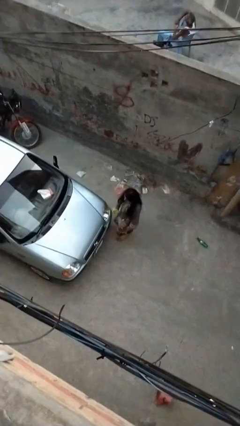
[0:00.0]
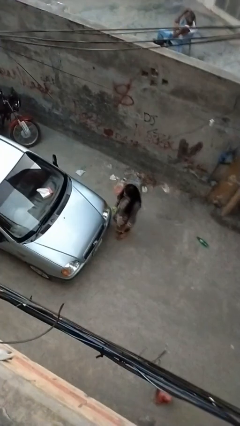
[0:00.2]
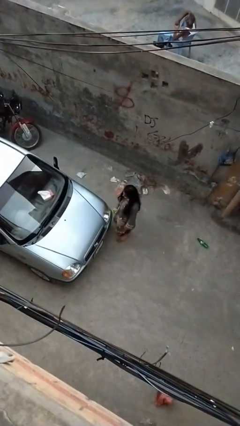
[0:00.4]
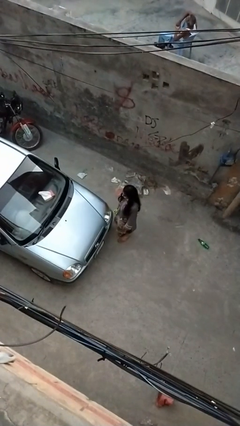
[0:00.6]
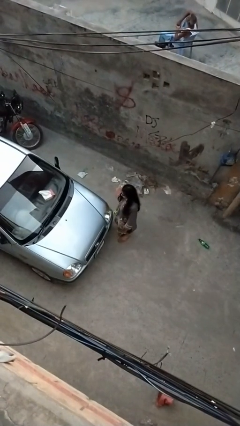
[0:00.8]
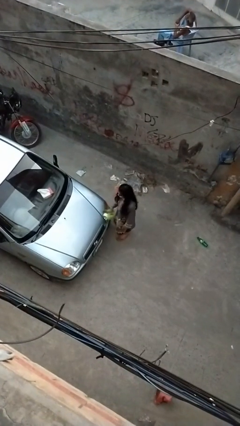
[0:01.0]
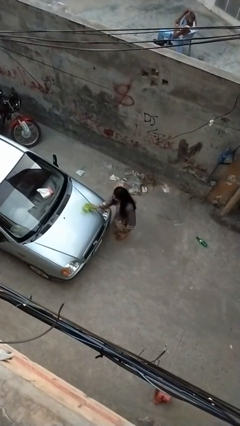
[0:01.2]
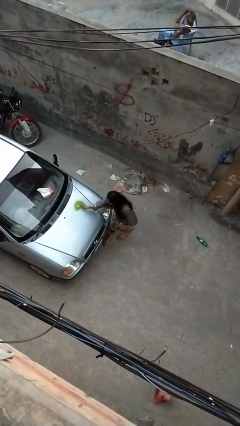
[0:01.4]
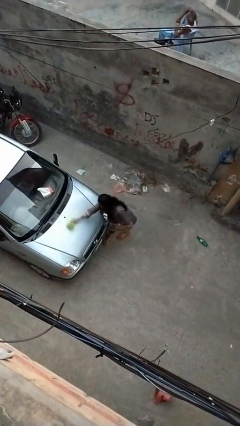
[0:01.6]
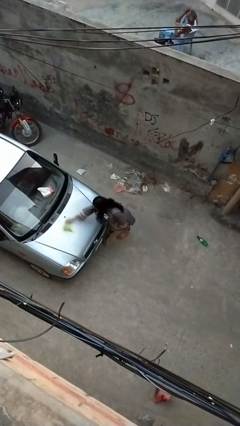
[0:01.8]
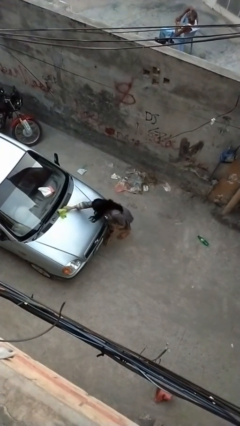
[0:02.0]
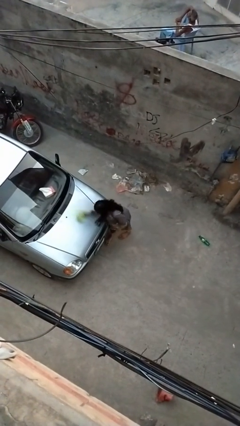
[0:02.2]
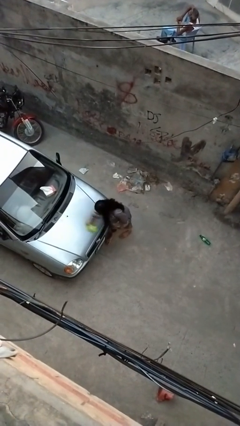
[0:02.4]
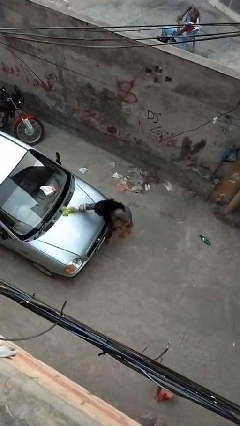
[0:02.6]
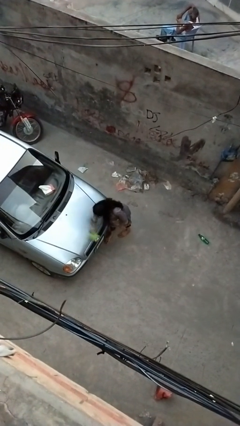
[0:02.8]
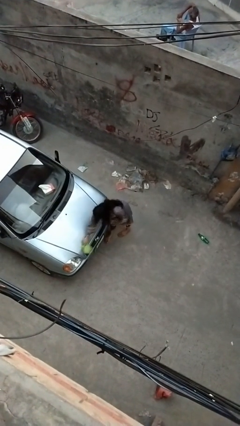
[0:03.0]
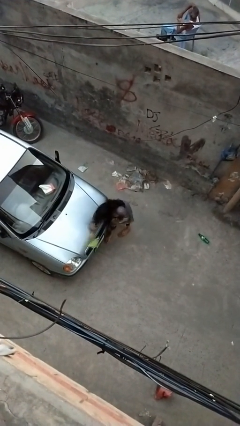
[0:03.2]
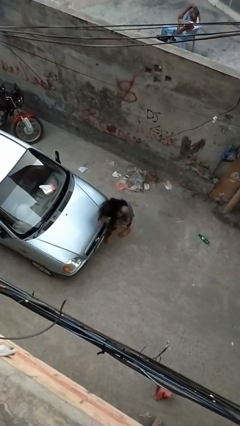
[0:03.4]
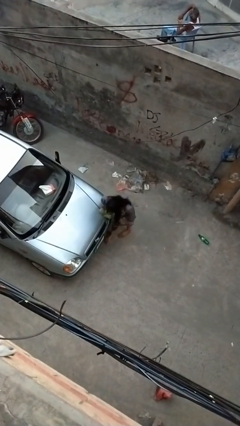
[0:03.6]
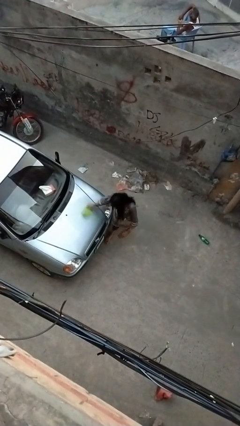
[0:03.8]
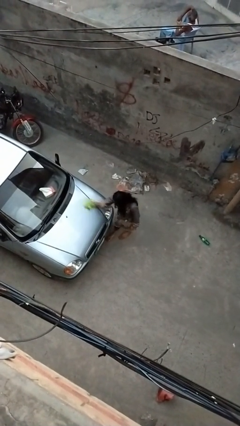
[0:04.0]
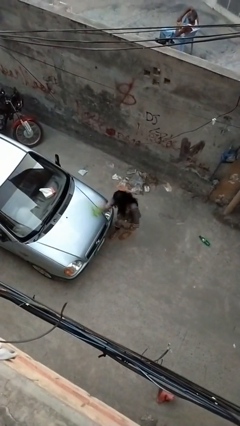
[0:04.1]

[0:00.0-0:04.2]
person polishes car with rag

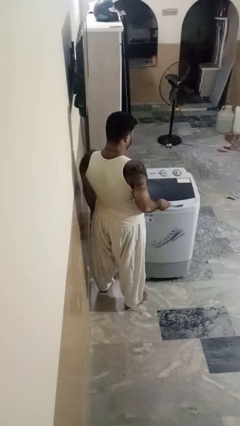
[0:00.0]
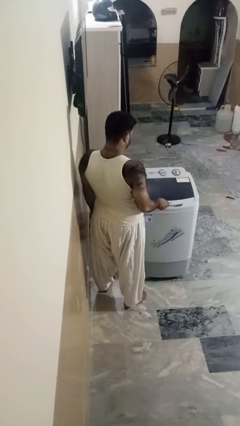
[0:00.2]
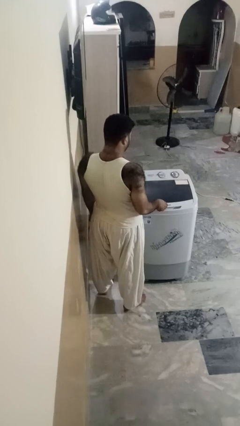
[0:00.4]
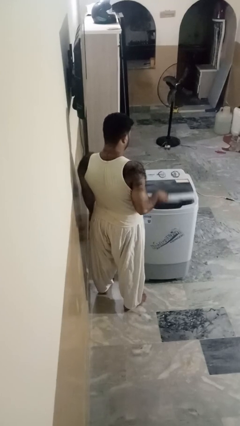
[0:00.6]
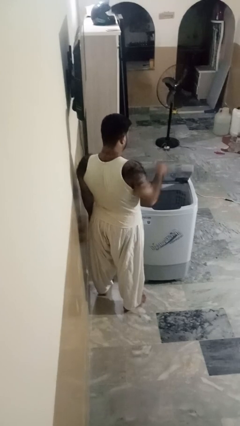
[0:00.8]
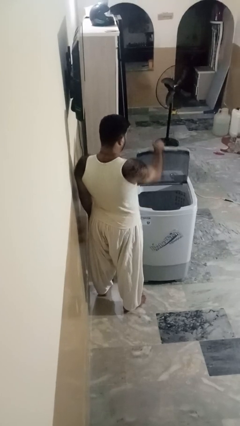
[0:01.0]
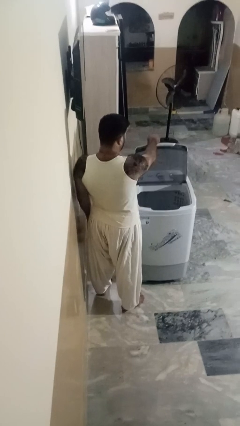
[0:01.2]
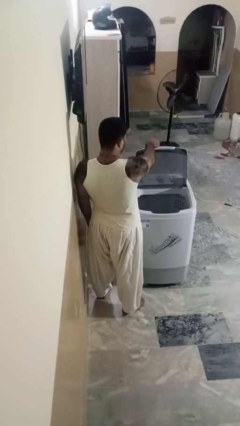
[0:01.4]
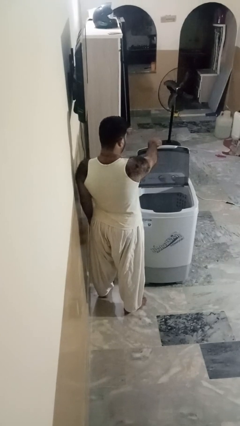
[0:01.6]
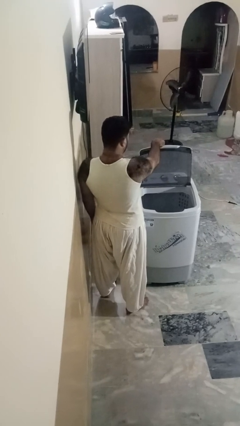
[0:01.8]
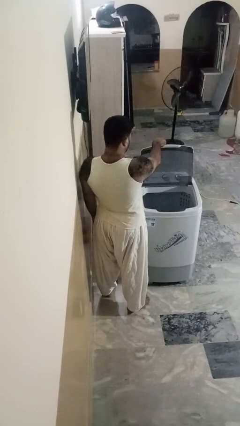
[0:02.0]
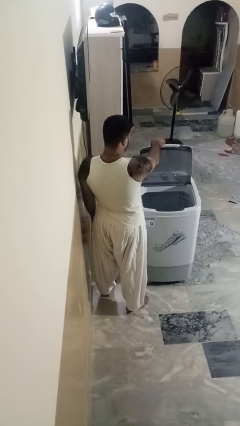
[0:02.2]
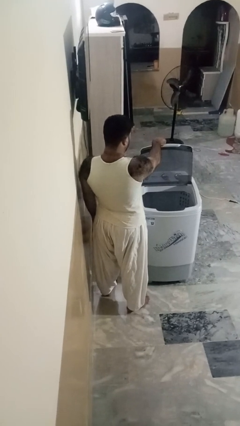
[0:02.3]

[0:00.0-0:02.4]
person opens clothes washer

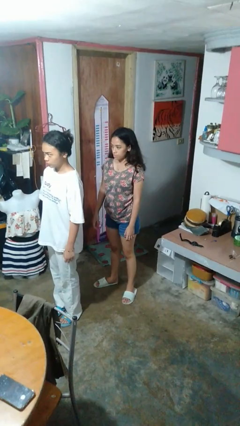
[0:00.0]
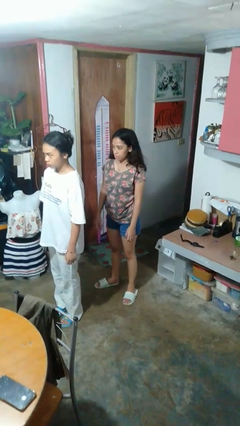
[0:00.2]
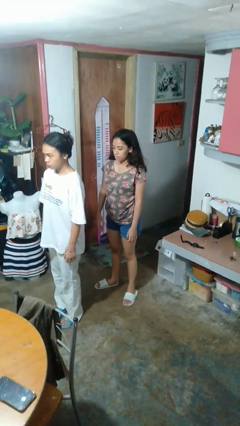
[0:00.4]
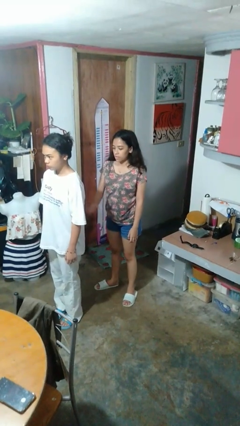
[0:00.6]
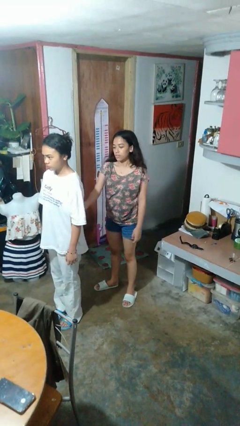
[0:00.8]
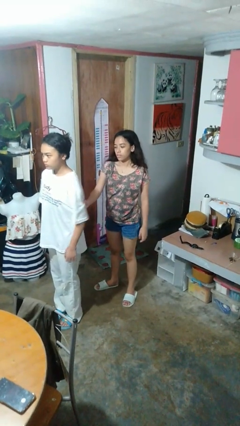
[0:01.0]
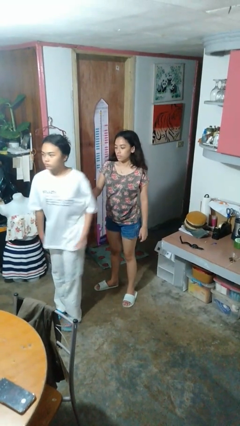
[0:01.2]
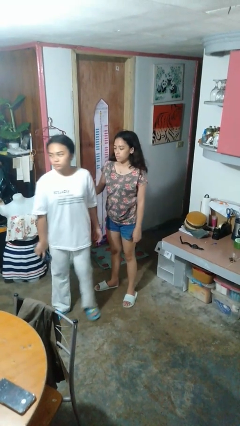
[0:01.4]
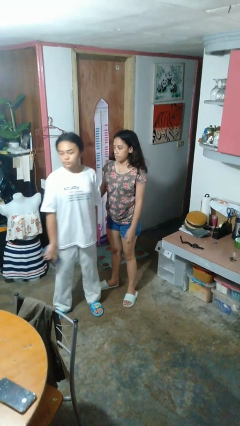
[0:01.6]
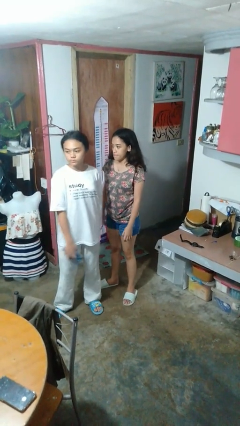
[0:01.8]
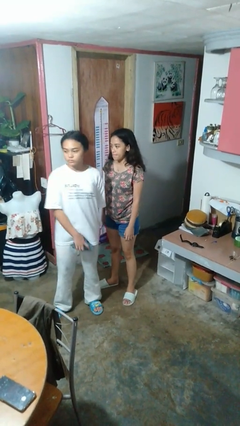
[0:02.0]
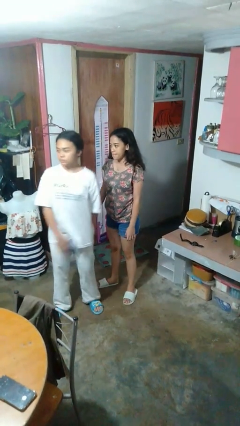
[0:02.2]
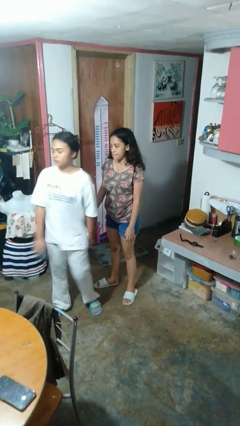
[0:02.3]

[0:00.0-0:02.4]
person grabs person by bicep

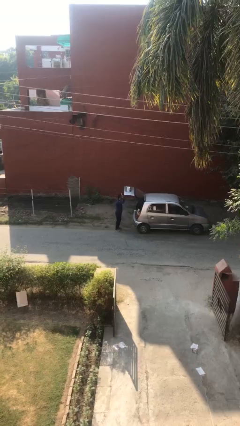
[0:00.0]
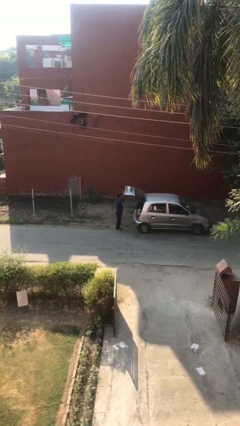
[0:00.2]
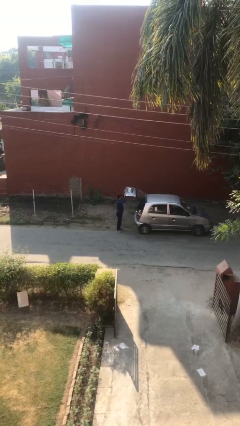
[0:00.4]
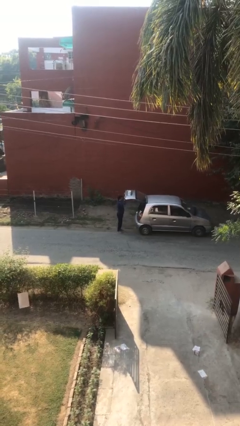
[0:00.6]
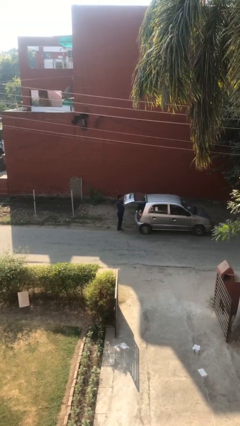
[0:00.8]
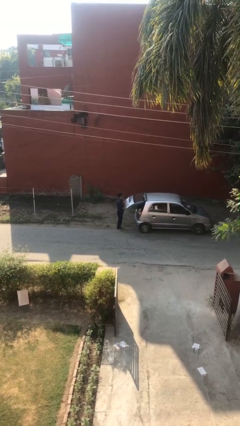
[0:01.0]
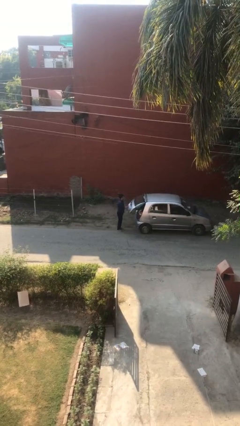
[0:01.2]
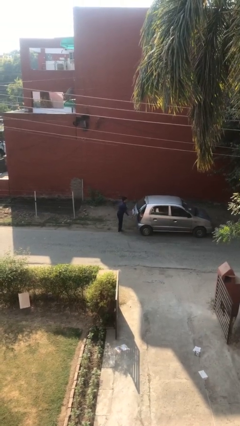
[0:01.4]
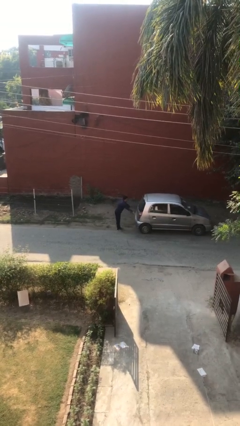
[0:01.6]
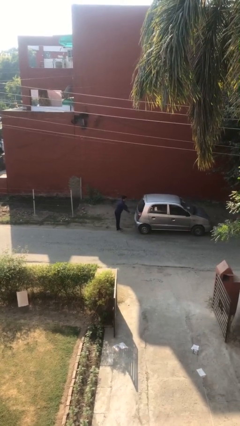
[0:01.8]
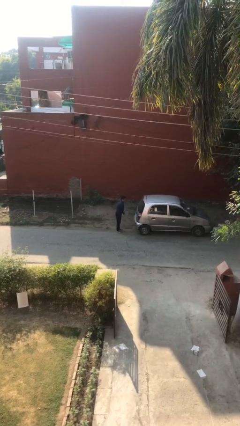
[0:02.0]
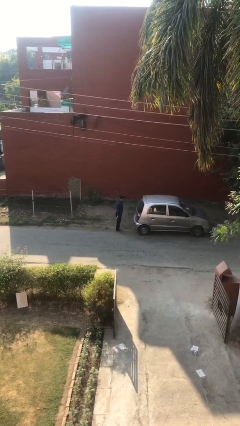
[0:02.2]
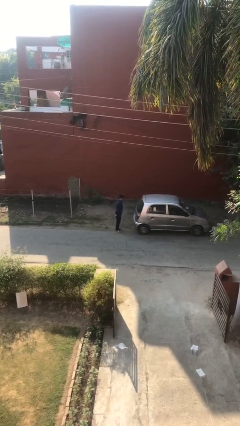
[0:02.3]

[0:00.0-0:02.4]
person closes car trunk

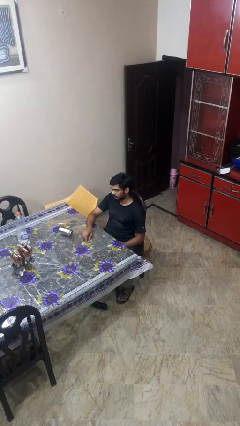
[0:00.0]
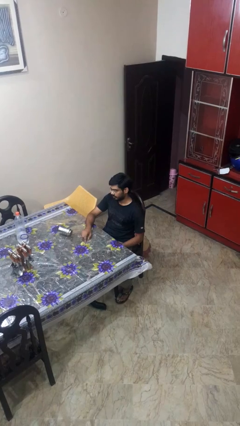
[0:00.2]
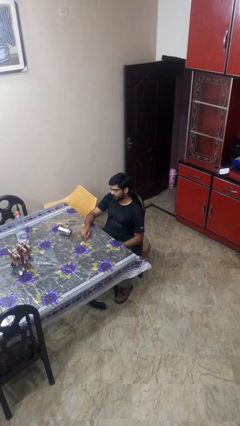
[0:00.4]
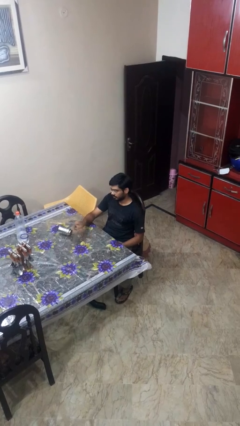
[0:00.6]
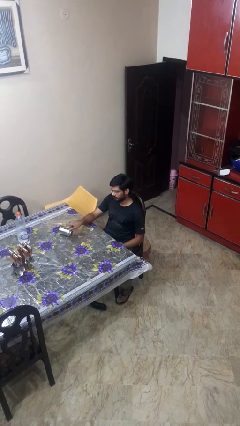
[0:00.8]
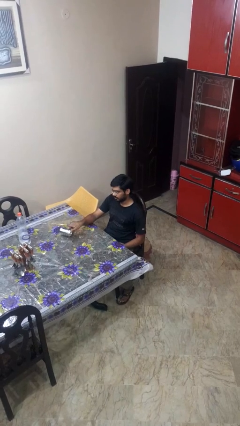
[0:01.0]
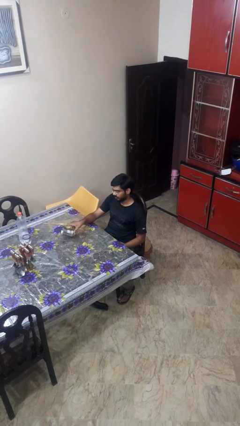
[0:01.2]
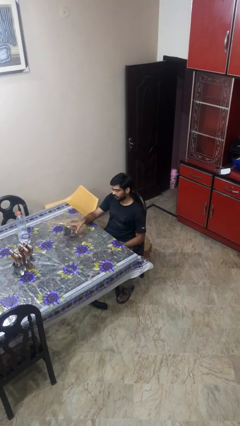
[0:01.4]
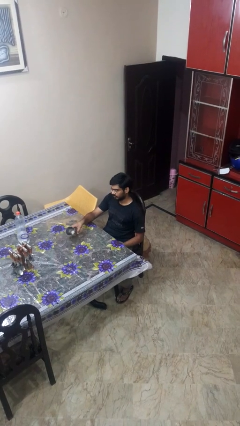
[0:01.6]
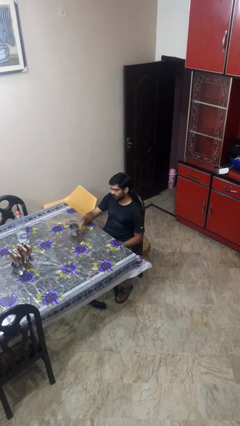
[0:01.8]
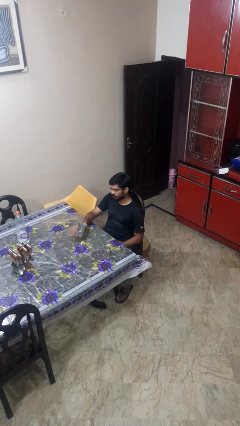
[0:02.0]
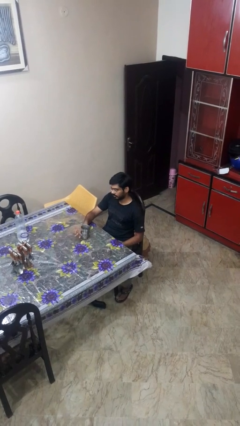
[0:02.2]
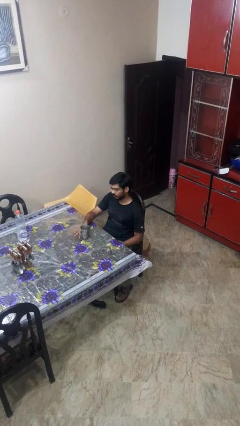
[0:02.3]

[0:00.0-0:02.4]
person sets upright glass

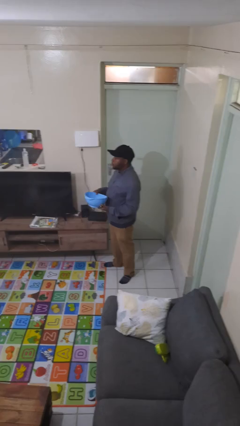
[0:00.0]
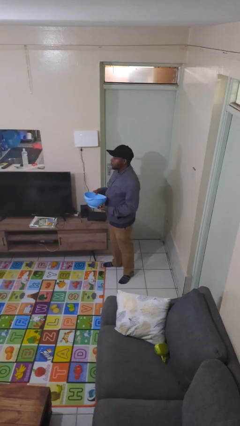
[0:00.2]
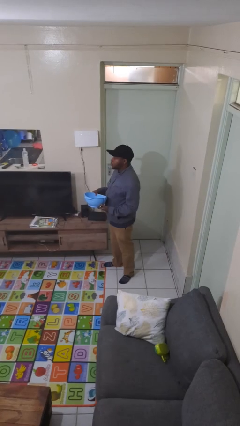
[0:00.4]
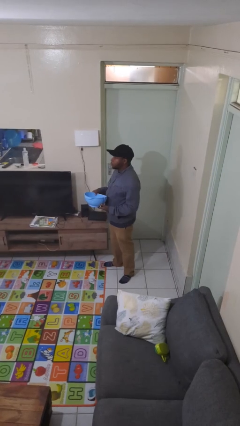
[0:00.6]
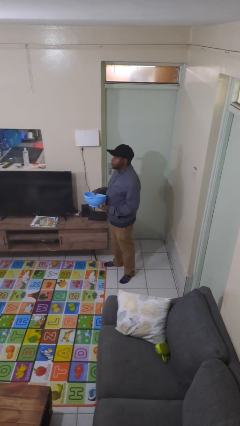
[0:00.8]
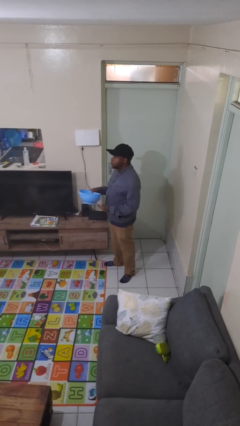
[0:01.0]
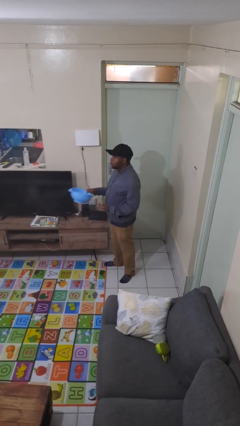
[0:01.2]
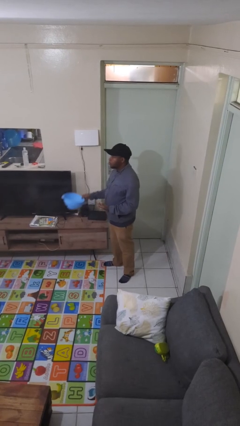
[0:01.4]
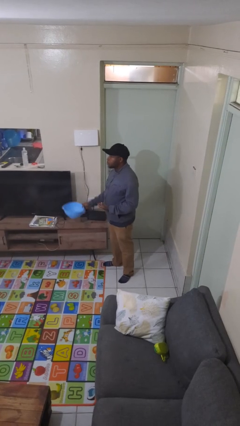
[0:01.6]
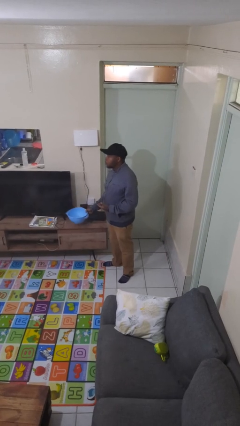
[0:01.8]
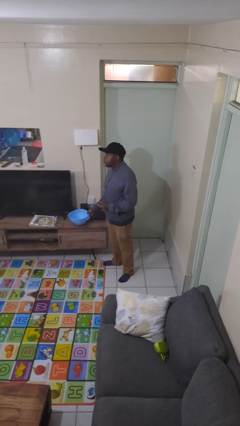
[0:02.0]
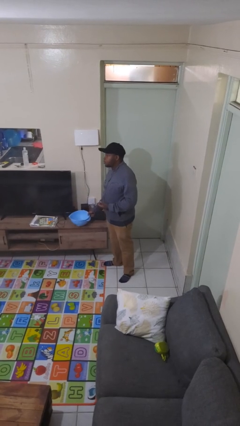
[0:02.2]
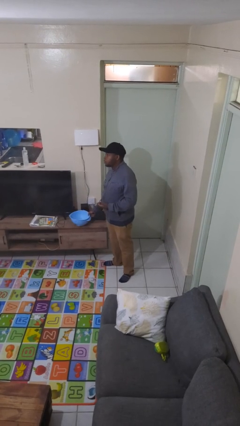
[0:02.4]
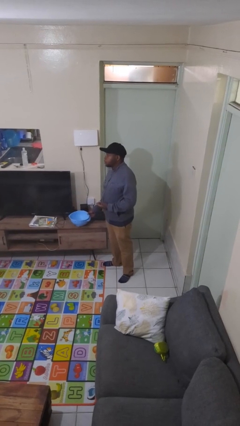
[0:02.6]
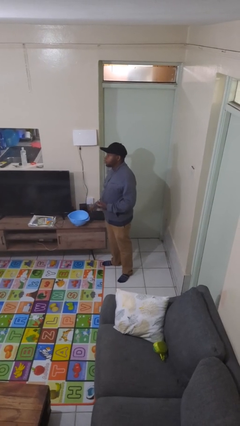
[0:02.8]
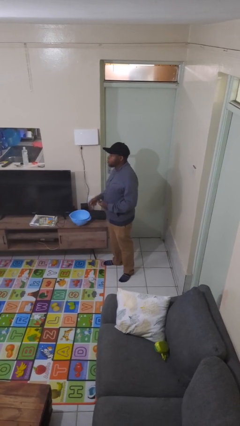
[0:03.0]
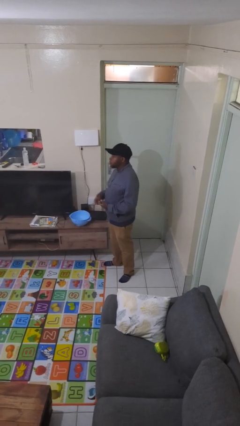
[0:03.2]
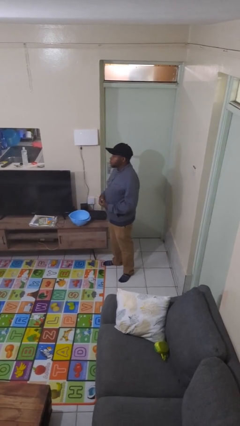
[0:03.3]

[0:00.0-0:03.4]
person puts down object on countertop

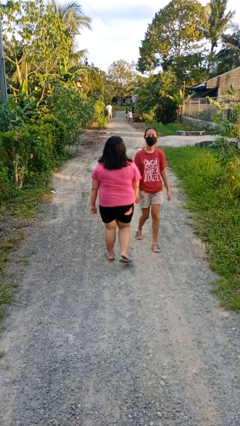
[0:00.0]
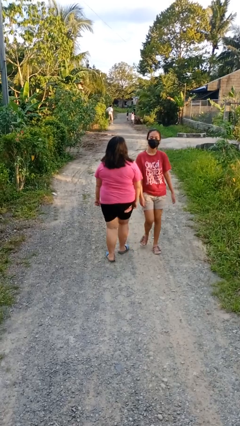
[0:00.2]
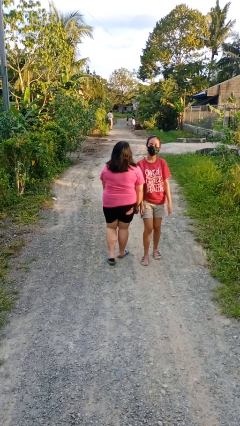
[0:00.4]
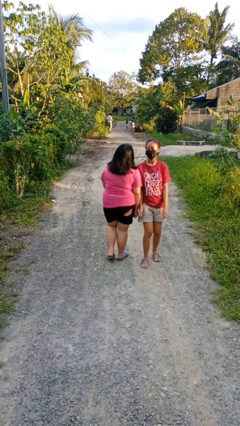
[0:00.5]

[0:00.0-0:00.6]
person bumps into person
